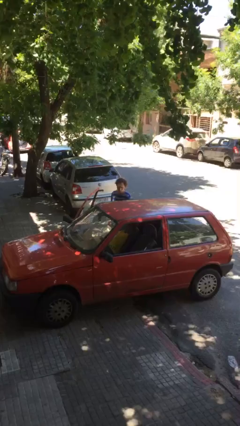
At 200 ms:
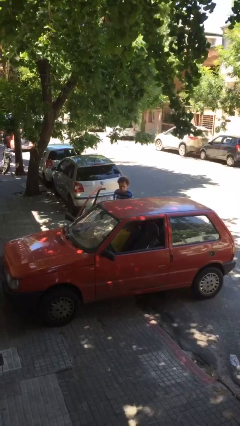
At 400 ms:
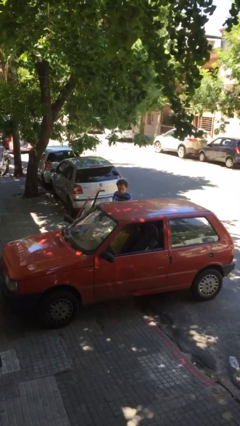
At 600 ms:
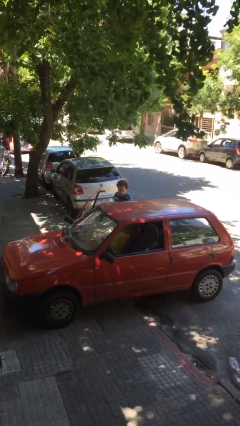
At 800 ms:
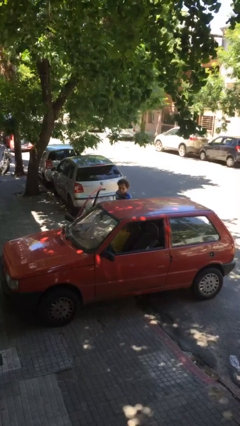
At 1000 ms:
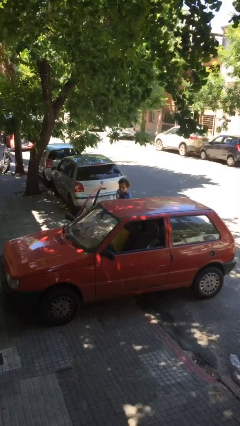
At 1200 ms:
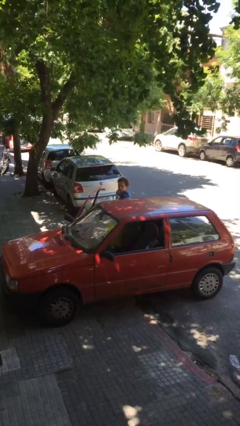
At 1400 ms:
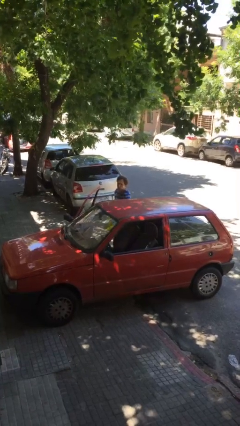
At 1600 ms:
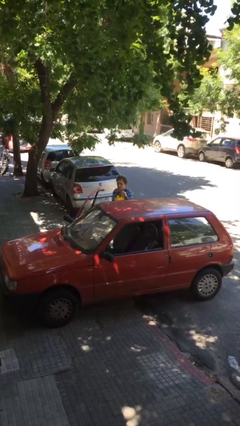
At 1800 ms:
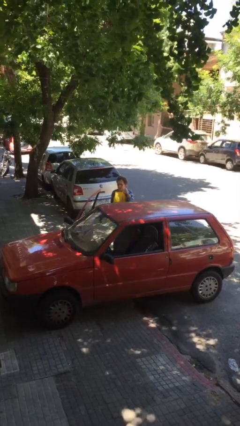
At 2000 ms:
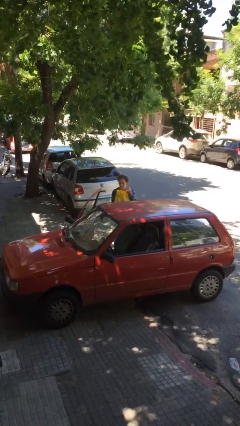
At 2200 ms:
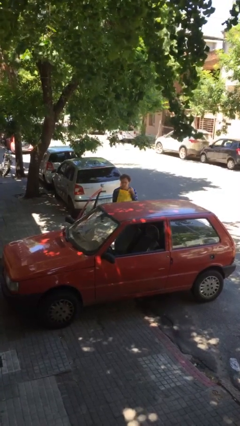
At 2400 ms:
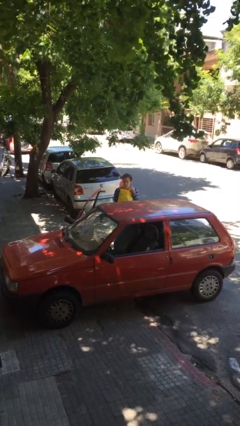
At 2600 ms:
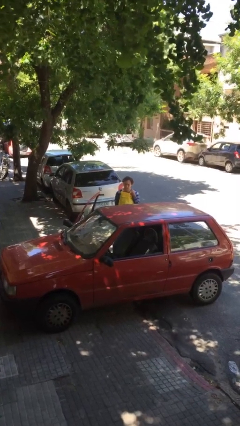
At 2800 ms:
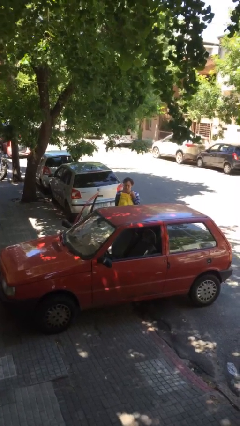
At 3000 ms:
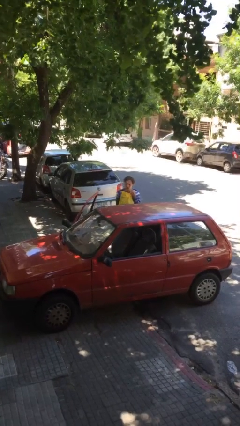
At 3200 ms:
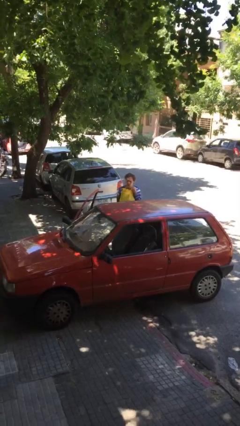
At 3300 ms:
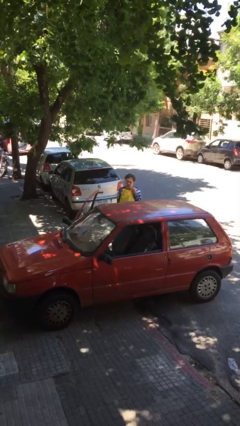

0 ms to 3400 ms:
person unloads car

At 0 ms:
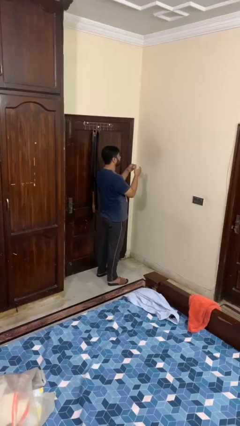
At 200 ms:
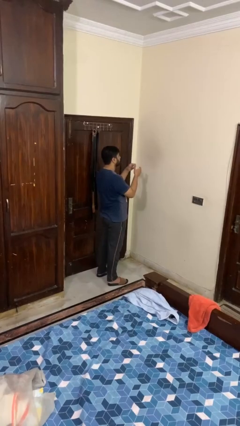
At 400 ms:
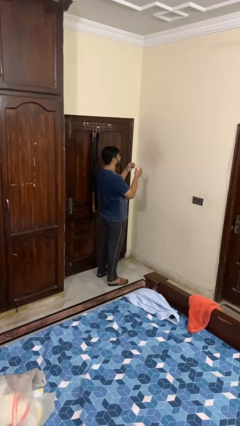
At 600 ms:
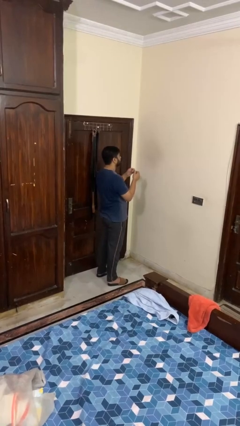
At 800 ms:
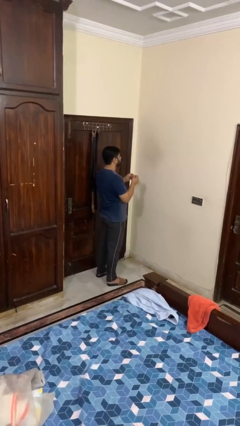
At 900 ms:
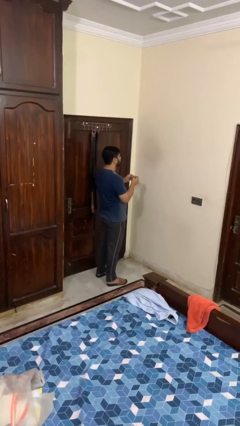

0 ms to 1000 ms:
person takes off ring

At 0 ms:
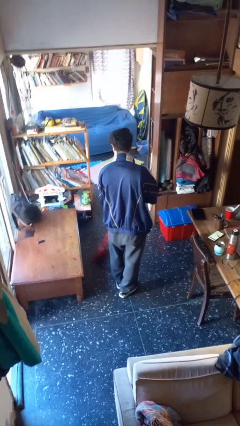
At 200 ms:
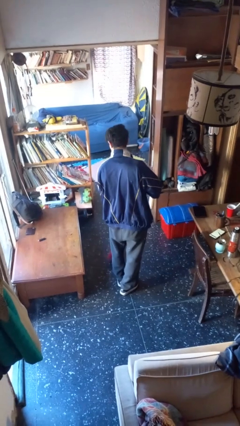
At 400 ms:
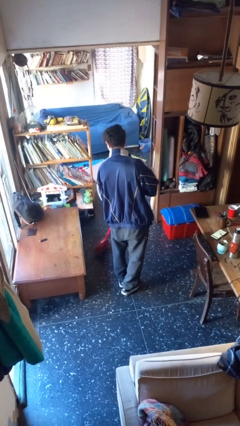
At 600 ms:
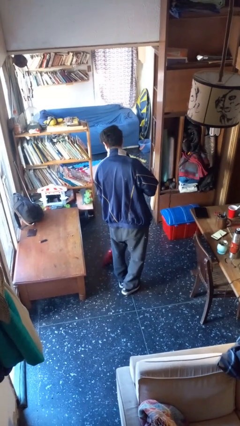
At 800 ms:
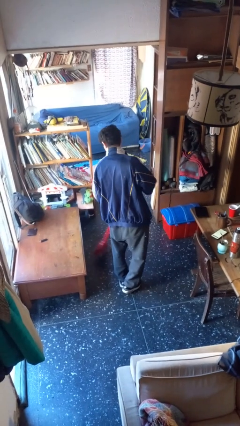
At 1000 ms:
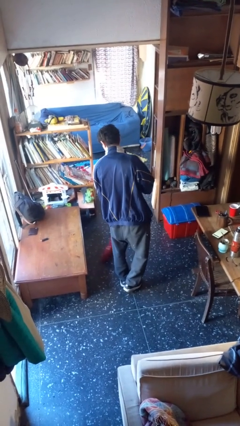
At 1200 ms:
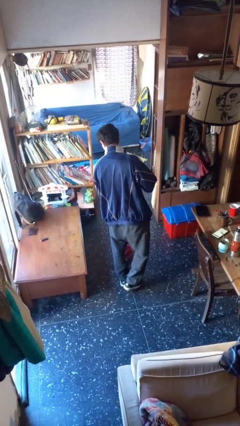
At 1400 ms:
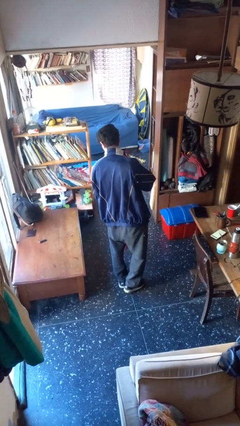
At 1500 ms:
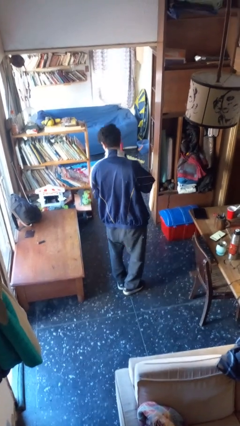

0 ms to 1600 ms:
person sweeps floor

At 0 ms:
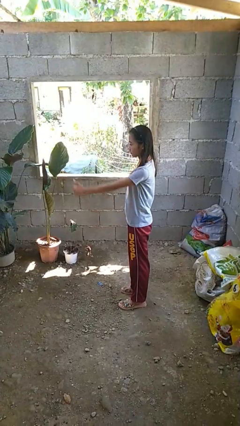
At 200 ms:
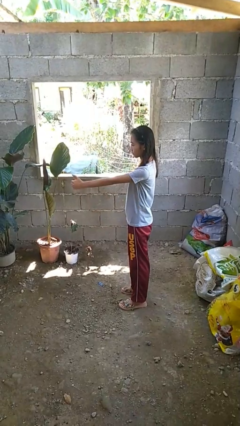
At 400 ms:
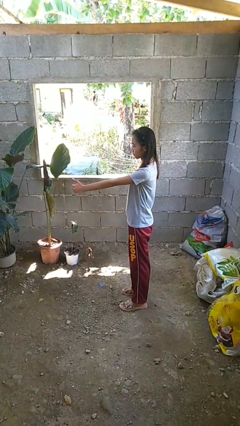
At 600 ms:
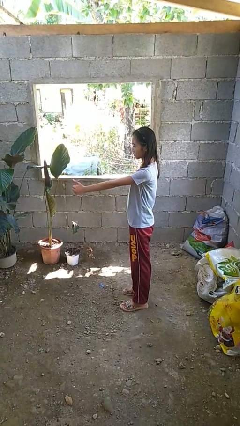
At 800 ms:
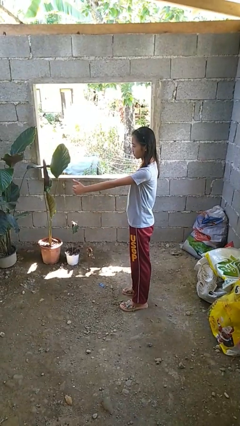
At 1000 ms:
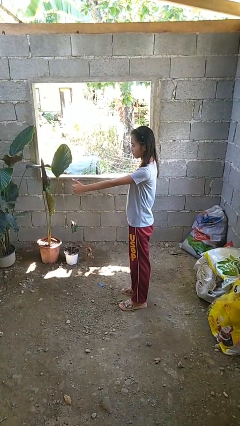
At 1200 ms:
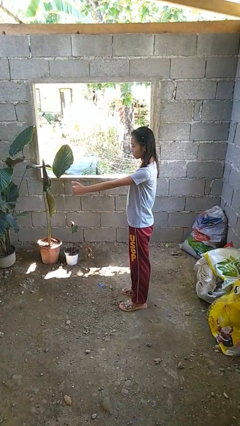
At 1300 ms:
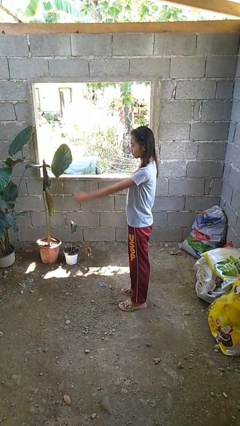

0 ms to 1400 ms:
person gestures thumbs up

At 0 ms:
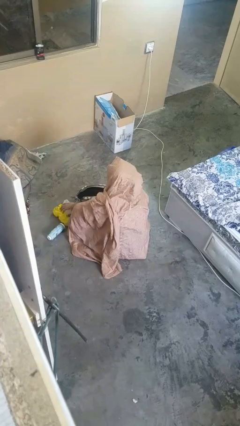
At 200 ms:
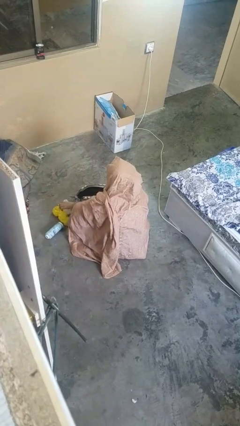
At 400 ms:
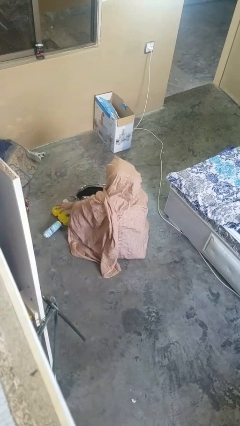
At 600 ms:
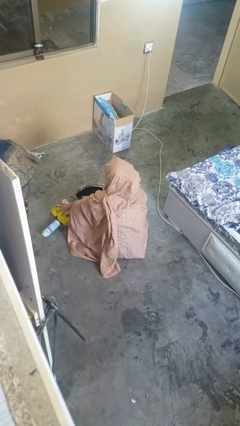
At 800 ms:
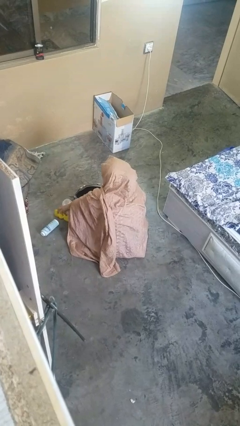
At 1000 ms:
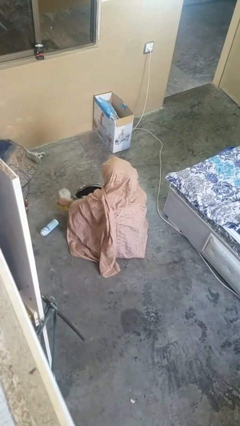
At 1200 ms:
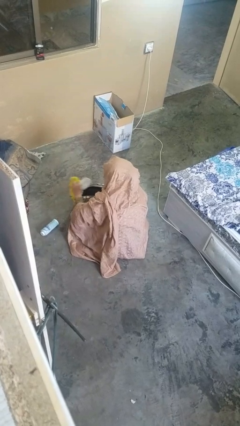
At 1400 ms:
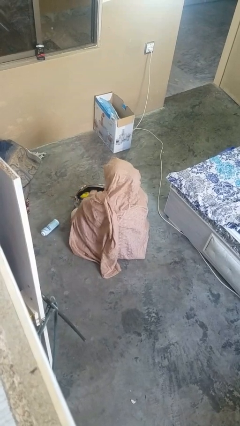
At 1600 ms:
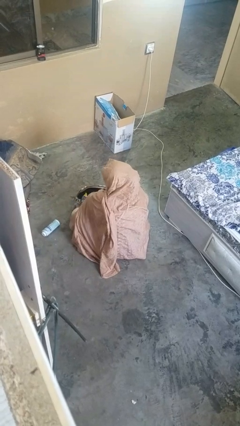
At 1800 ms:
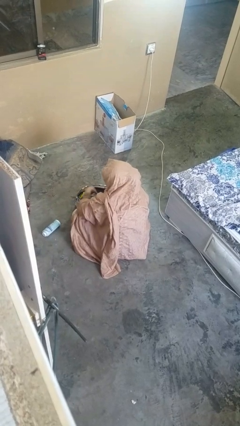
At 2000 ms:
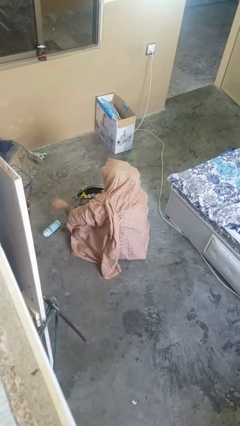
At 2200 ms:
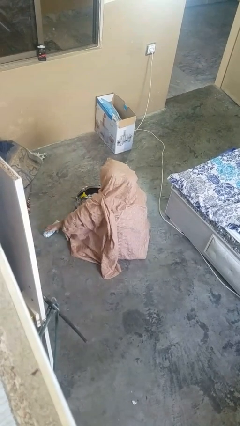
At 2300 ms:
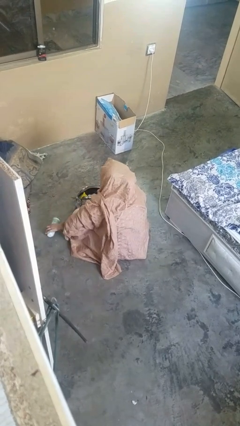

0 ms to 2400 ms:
person puts object into purse

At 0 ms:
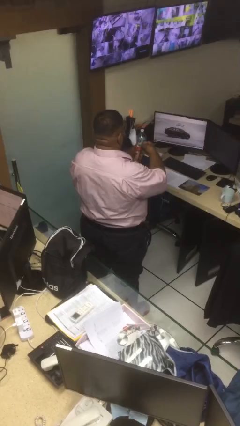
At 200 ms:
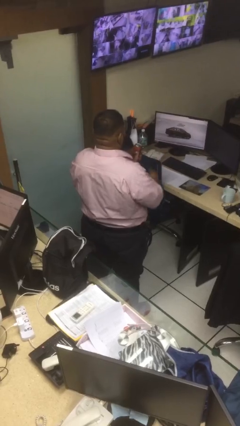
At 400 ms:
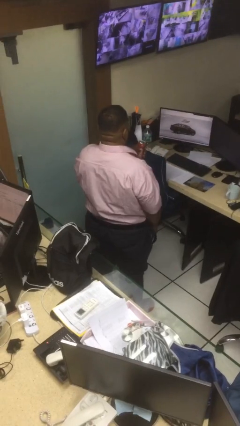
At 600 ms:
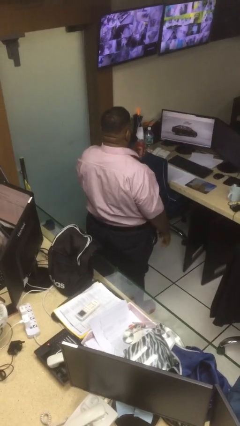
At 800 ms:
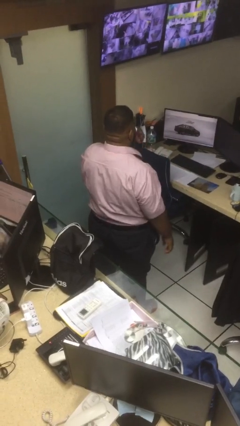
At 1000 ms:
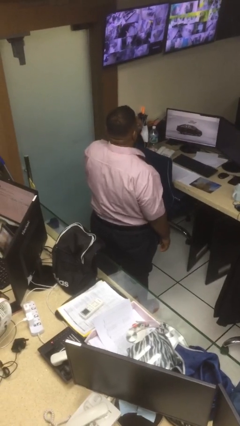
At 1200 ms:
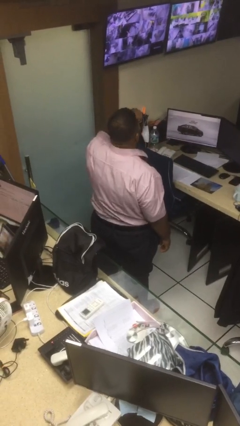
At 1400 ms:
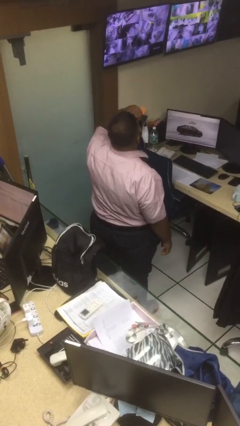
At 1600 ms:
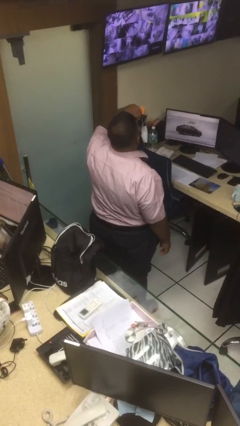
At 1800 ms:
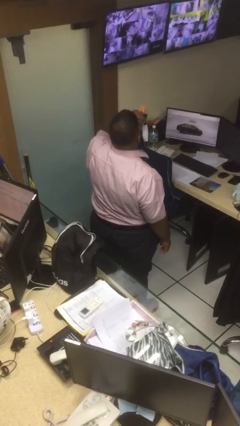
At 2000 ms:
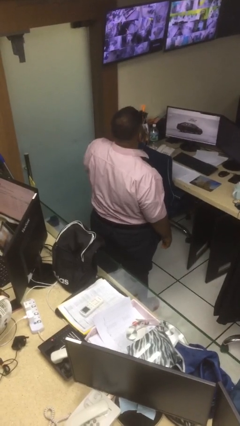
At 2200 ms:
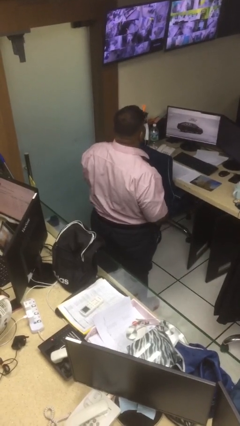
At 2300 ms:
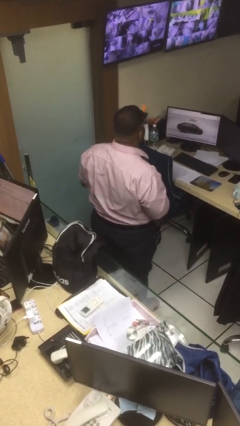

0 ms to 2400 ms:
person drinks from beverage can

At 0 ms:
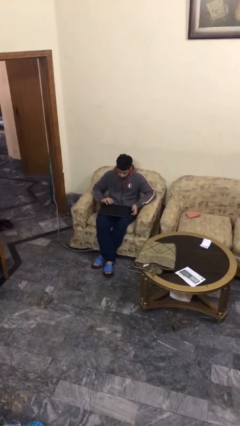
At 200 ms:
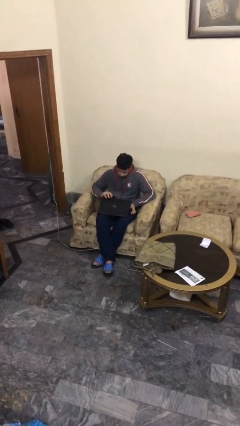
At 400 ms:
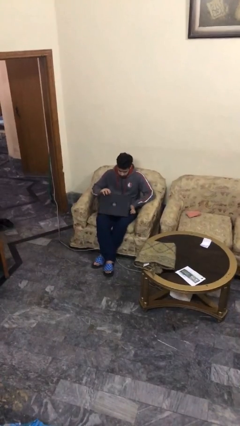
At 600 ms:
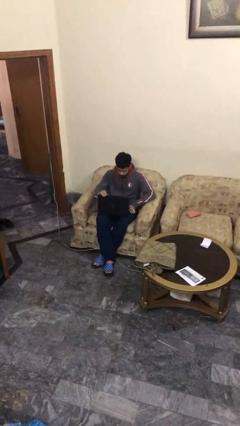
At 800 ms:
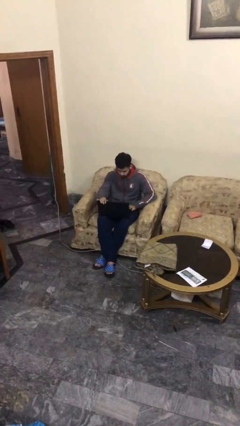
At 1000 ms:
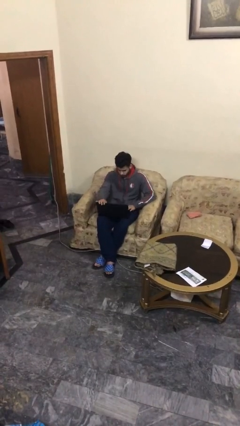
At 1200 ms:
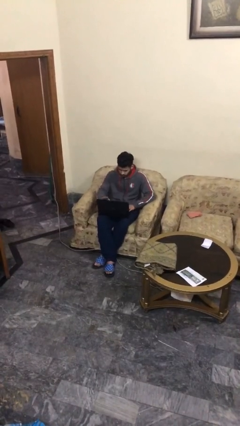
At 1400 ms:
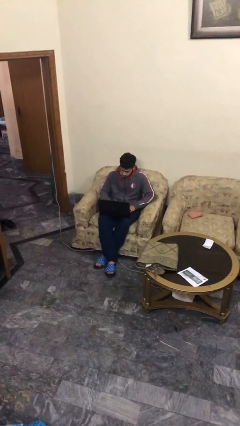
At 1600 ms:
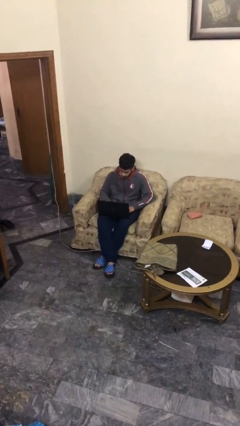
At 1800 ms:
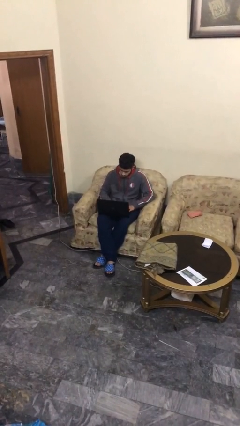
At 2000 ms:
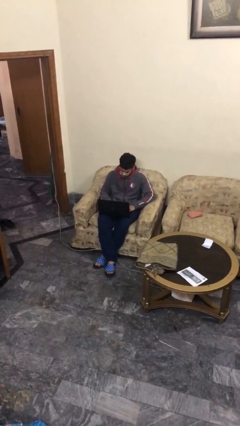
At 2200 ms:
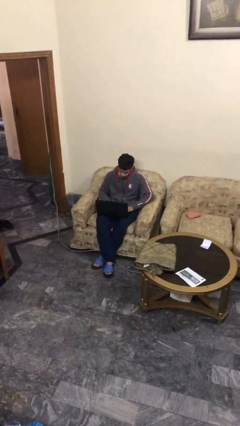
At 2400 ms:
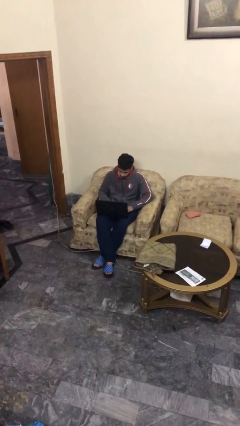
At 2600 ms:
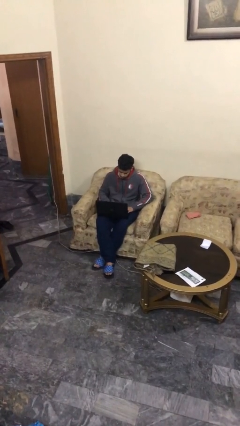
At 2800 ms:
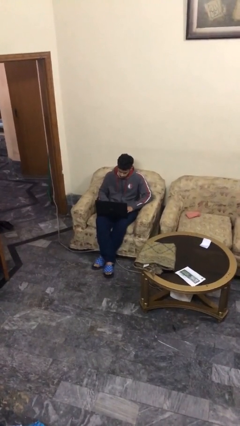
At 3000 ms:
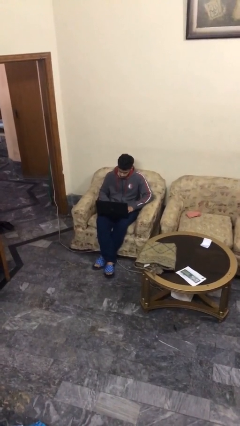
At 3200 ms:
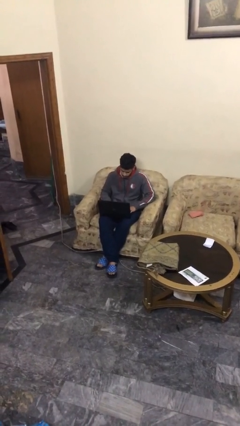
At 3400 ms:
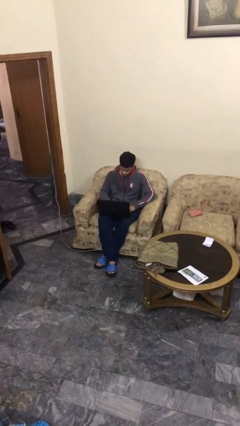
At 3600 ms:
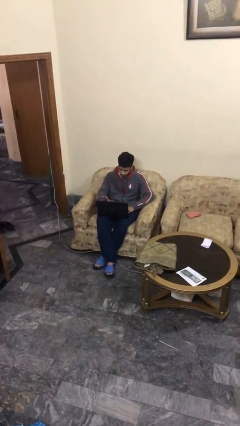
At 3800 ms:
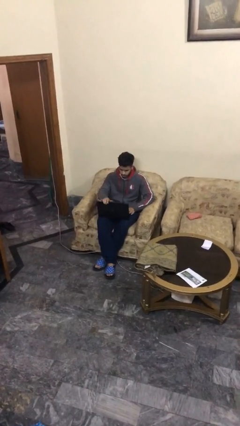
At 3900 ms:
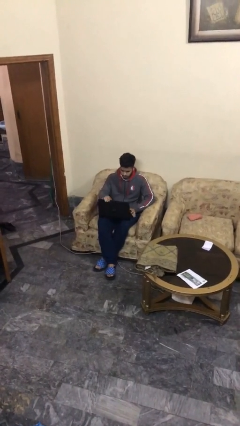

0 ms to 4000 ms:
person interacts with laptop

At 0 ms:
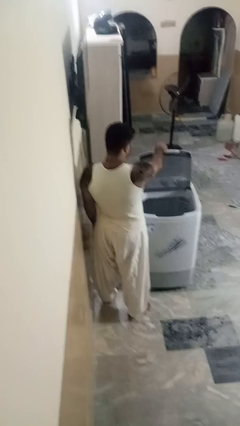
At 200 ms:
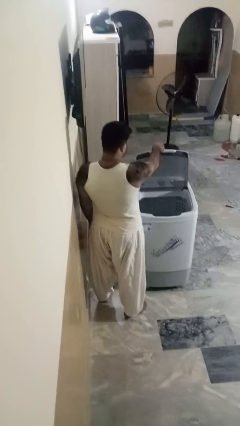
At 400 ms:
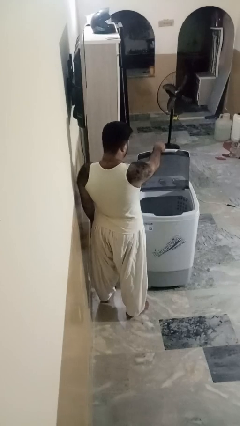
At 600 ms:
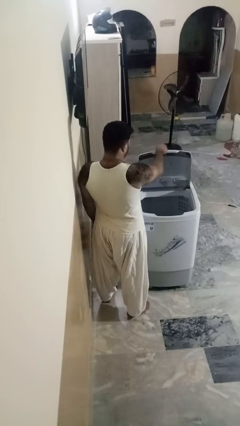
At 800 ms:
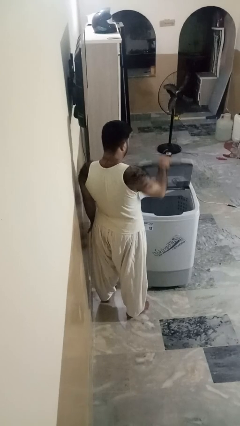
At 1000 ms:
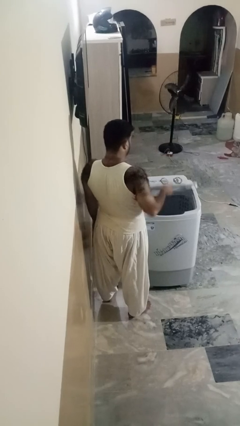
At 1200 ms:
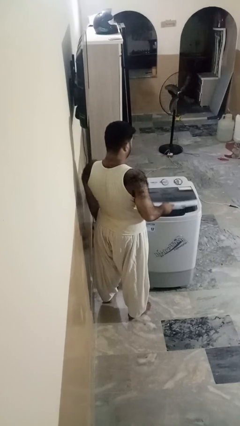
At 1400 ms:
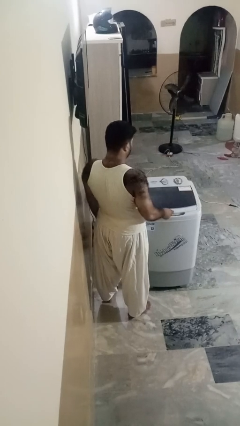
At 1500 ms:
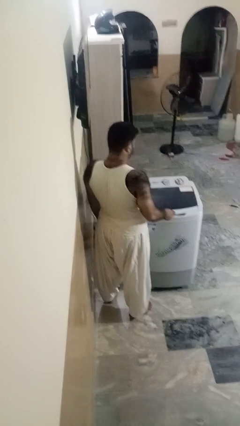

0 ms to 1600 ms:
person closes clothes washer
